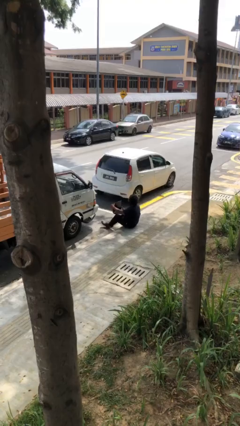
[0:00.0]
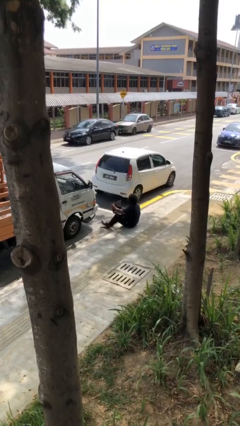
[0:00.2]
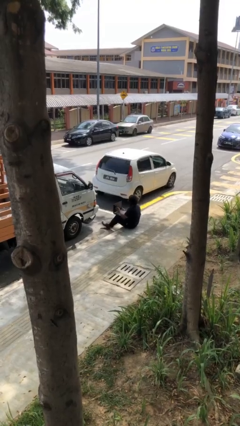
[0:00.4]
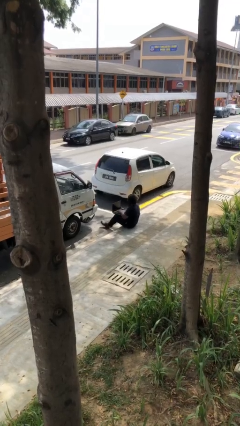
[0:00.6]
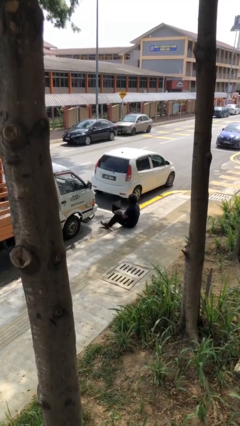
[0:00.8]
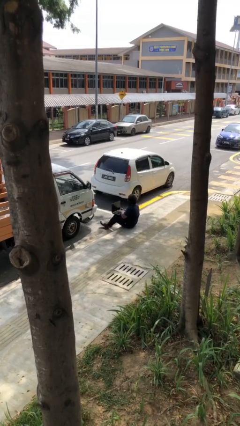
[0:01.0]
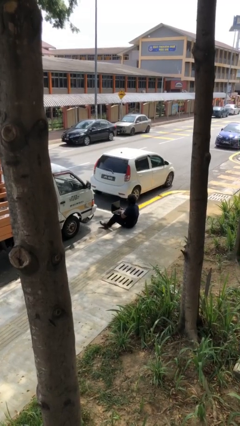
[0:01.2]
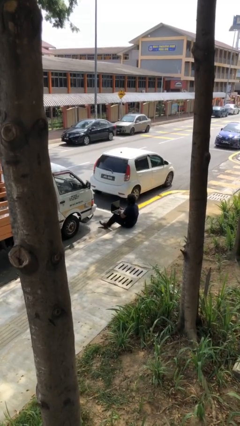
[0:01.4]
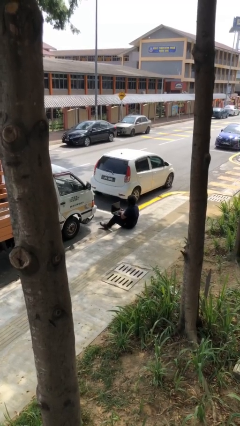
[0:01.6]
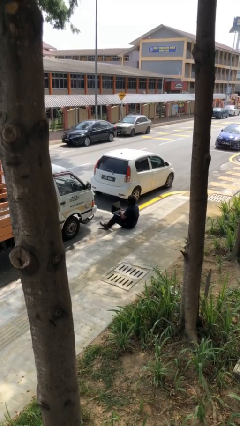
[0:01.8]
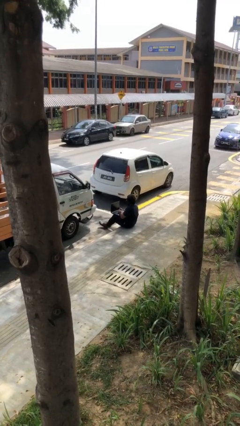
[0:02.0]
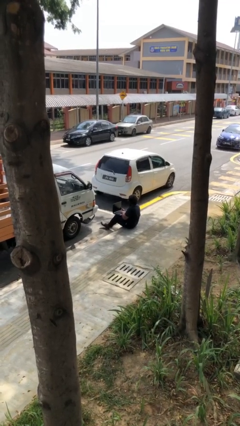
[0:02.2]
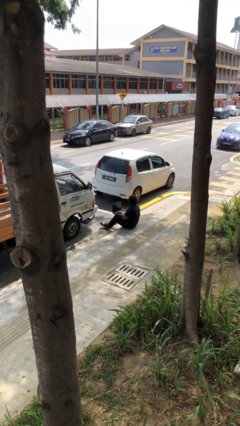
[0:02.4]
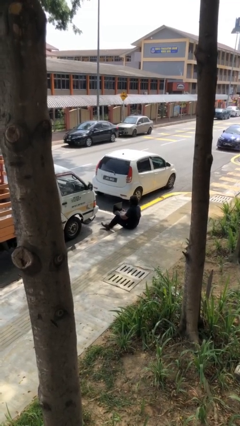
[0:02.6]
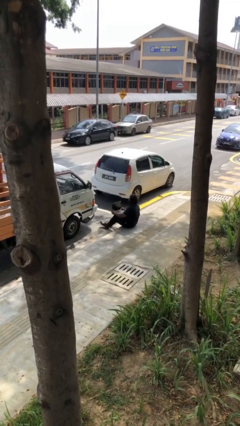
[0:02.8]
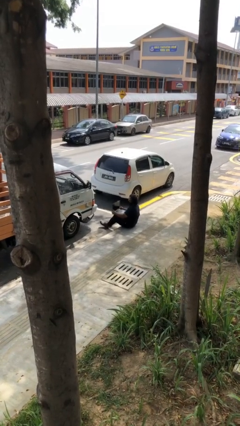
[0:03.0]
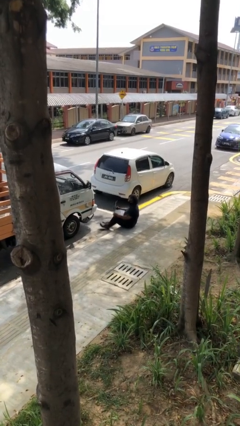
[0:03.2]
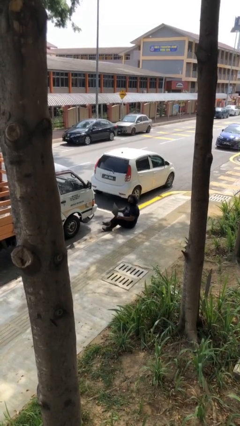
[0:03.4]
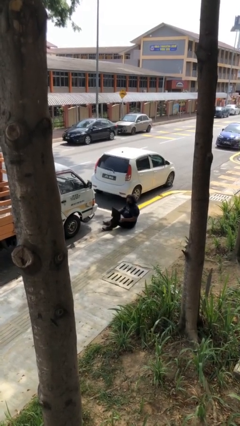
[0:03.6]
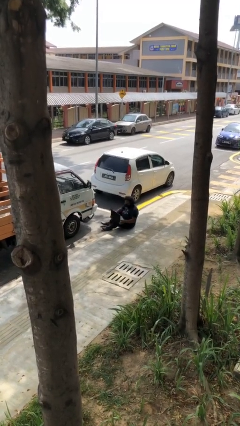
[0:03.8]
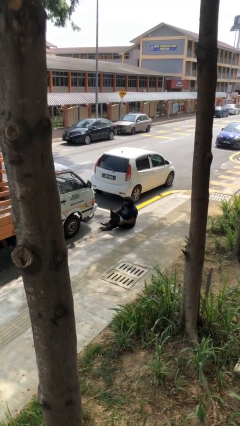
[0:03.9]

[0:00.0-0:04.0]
person interacts with laptop

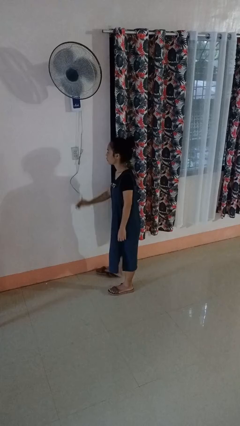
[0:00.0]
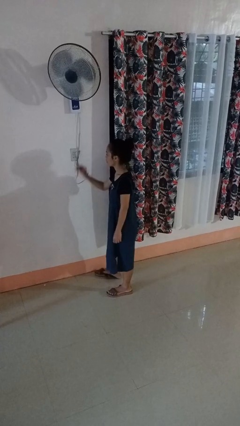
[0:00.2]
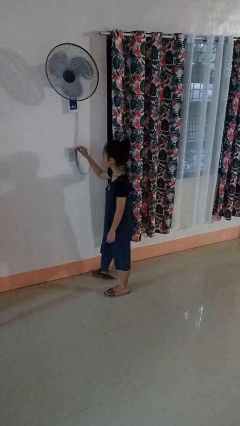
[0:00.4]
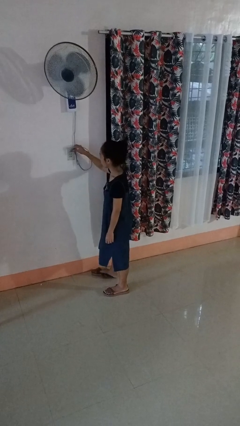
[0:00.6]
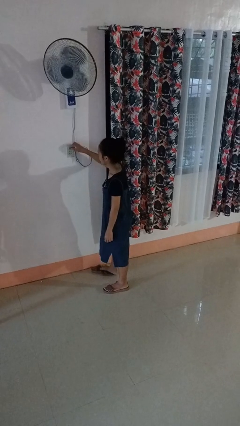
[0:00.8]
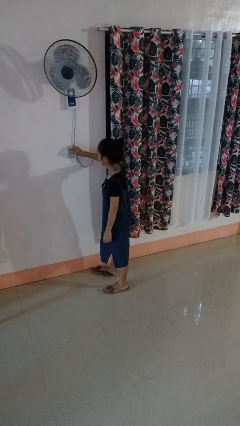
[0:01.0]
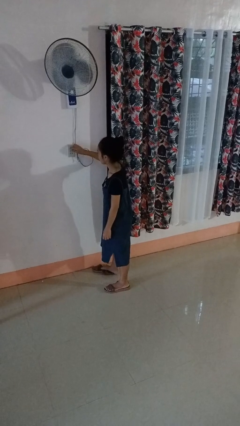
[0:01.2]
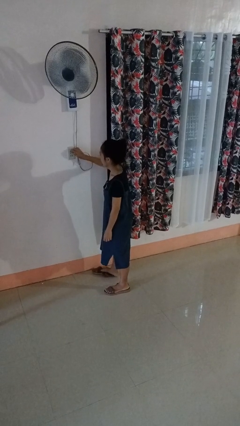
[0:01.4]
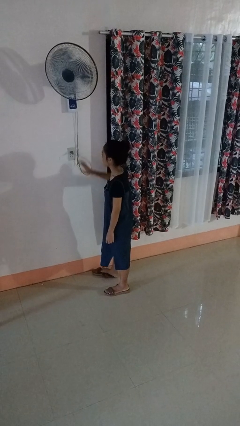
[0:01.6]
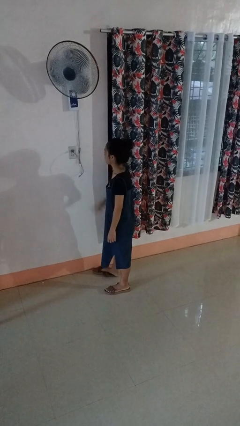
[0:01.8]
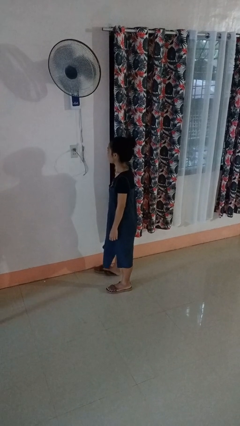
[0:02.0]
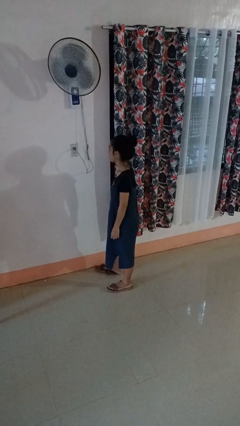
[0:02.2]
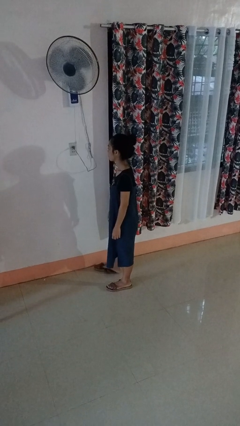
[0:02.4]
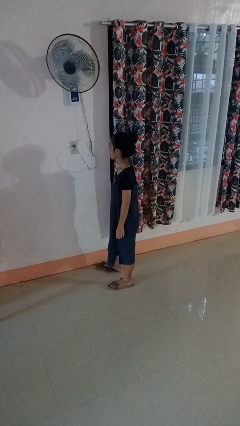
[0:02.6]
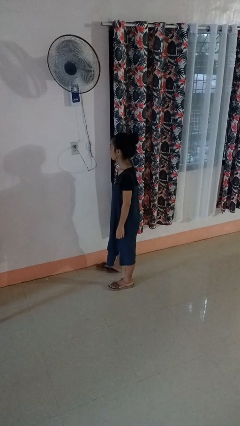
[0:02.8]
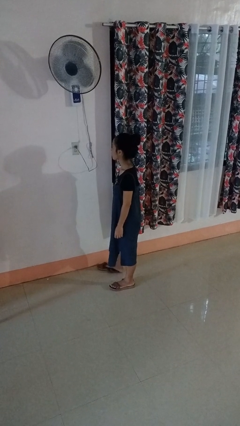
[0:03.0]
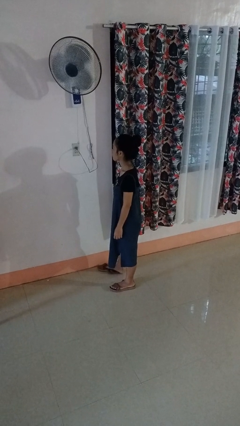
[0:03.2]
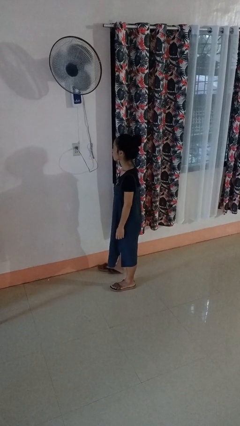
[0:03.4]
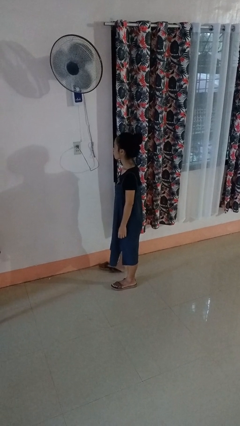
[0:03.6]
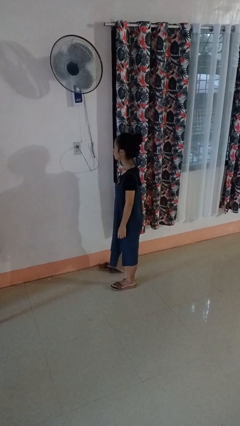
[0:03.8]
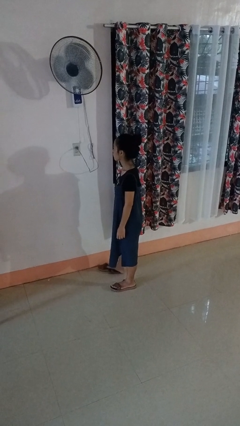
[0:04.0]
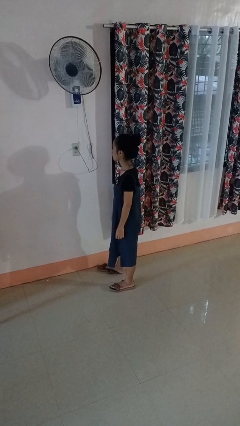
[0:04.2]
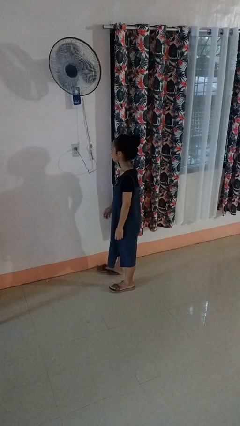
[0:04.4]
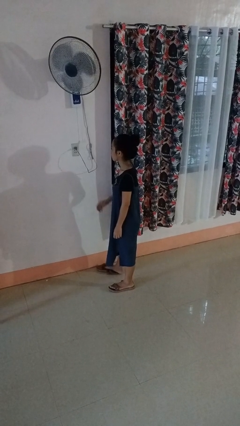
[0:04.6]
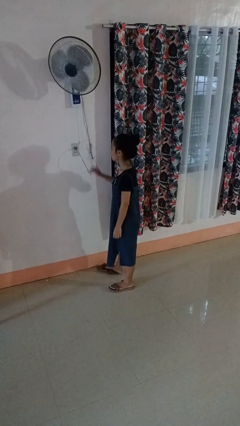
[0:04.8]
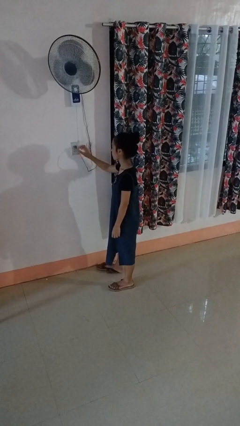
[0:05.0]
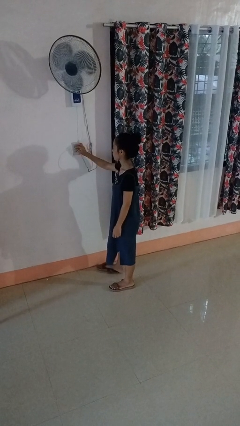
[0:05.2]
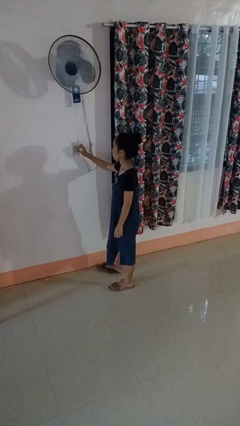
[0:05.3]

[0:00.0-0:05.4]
person plugs into electrical socket

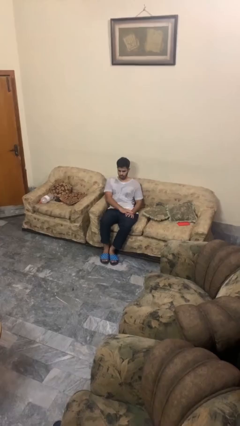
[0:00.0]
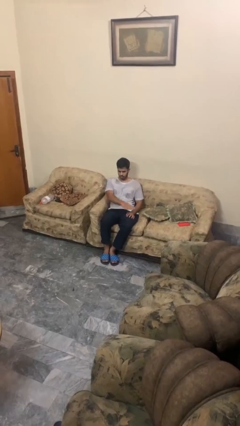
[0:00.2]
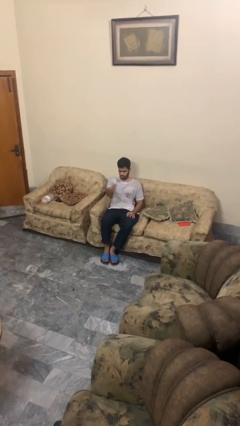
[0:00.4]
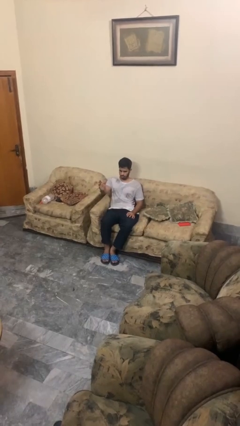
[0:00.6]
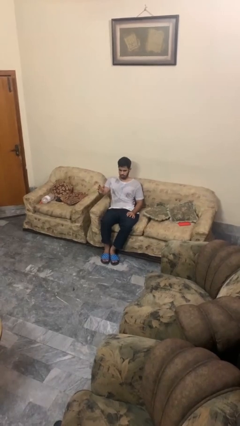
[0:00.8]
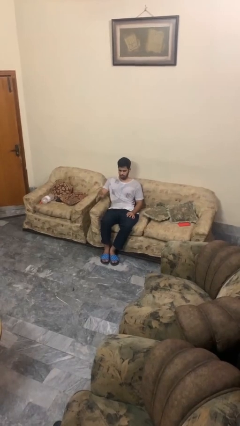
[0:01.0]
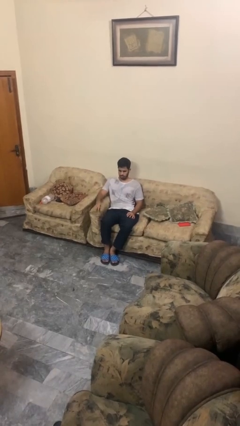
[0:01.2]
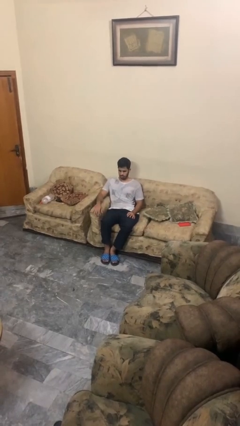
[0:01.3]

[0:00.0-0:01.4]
person gestures swipe right

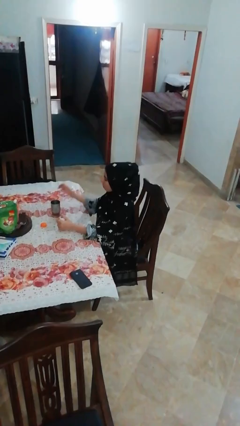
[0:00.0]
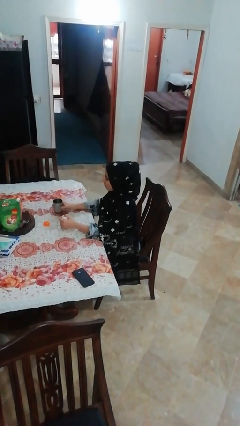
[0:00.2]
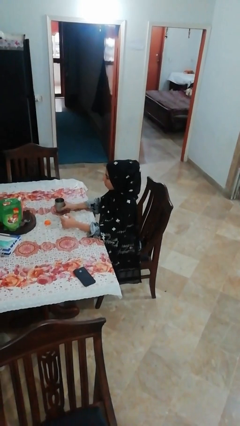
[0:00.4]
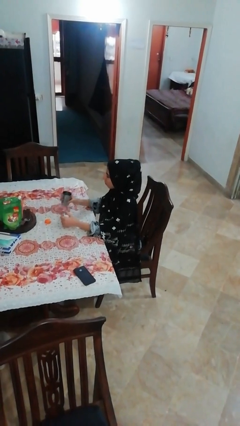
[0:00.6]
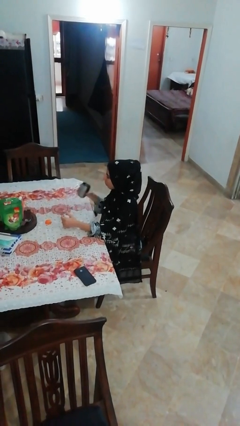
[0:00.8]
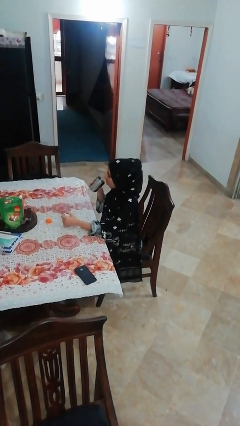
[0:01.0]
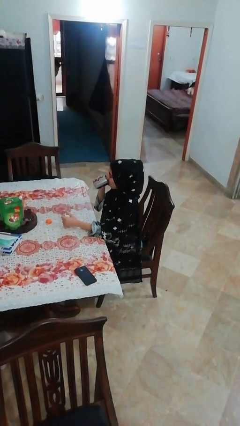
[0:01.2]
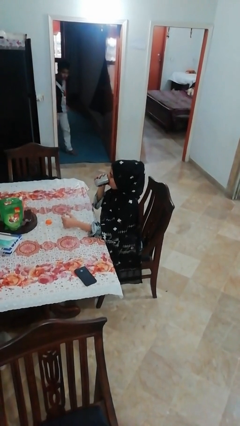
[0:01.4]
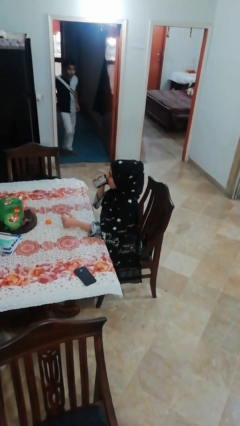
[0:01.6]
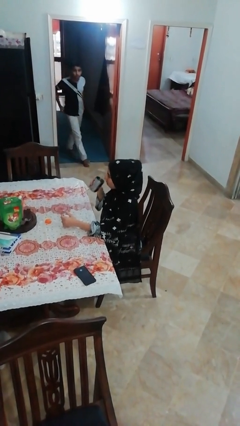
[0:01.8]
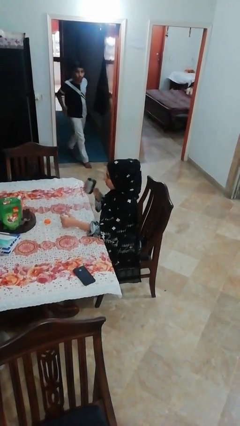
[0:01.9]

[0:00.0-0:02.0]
person drinks from cup

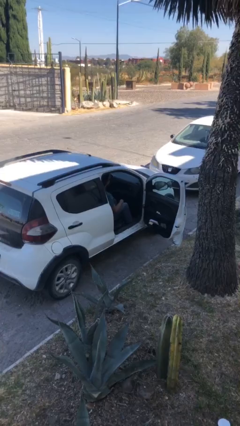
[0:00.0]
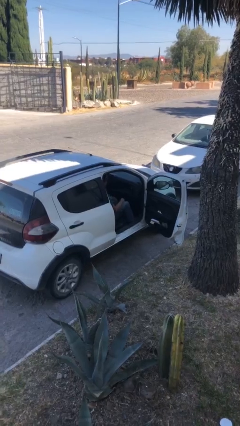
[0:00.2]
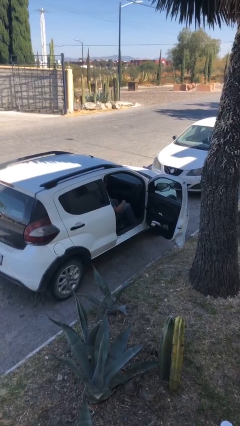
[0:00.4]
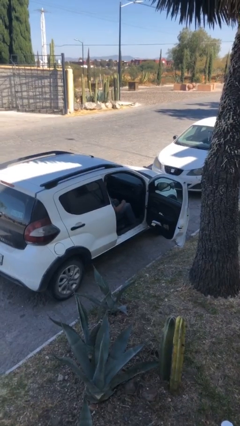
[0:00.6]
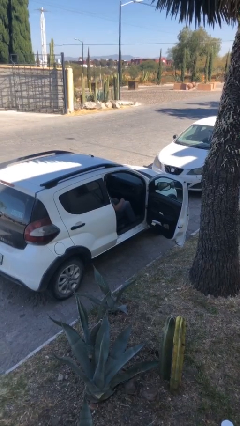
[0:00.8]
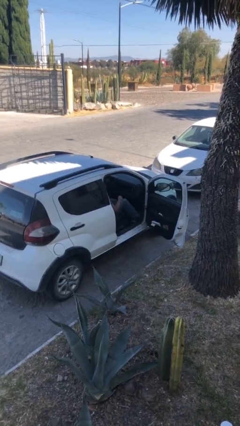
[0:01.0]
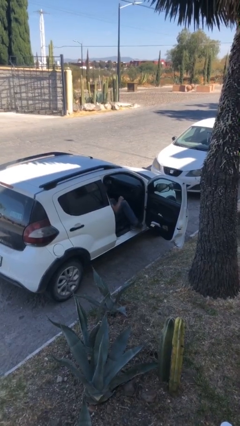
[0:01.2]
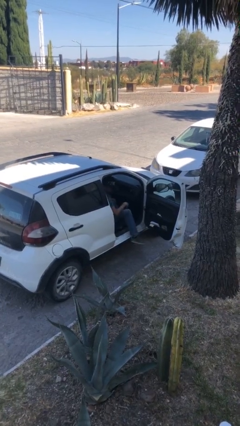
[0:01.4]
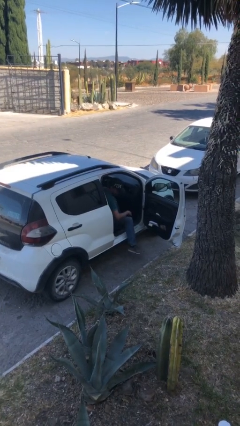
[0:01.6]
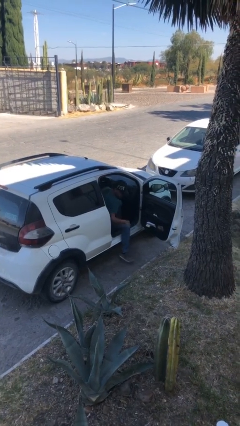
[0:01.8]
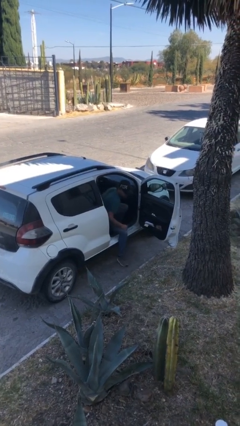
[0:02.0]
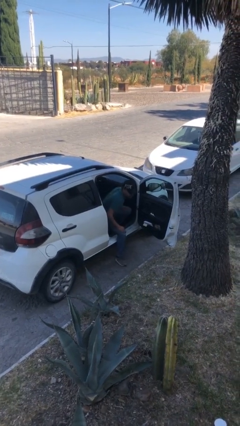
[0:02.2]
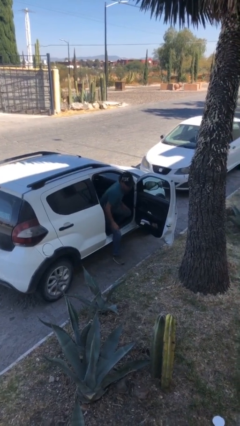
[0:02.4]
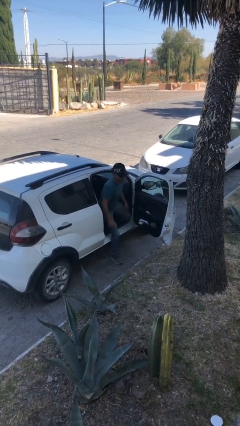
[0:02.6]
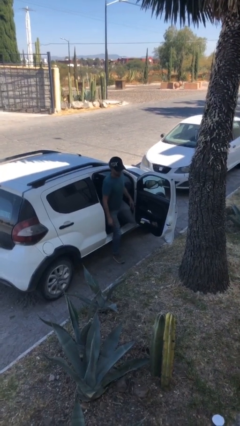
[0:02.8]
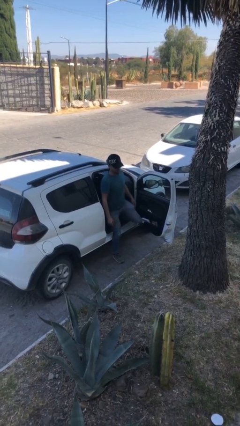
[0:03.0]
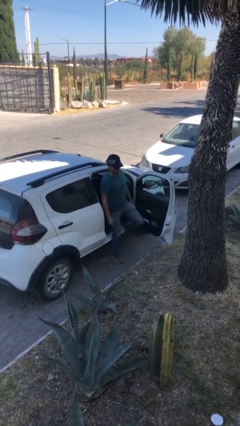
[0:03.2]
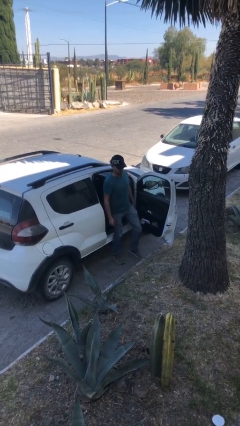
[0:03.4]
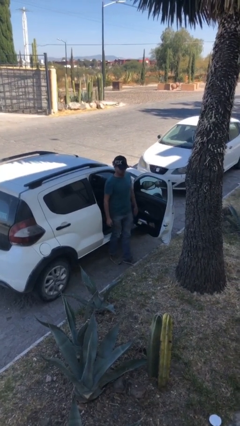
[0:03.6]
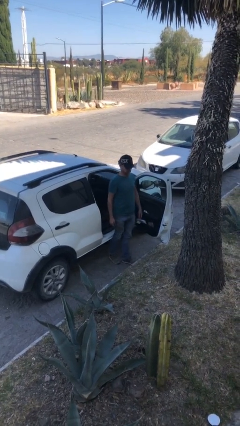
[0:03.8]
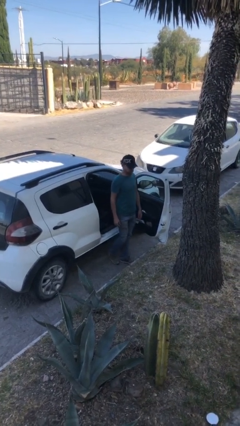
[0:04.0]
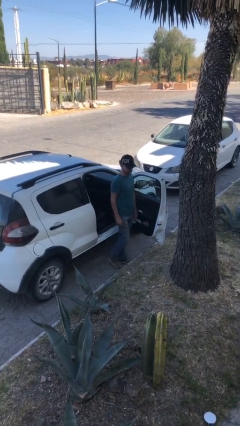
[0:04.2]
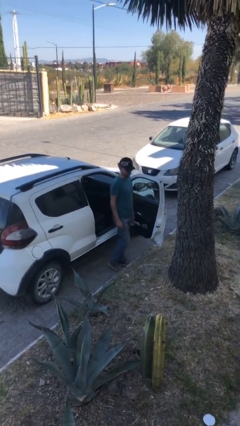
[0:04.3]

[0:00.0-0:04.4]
person exits car

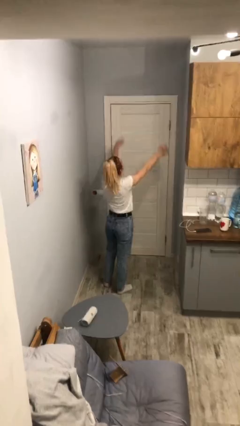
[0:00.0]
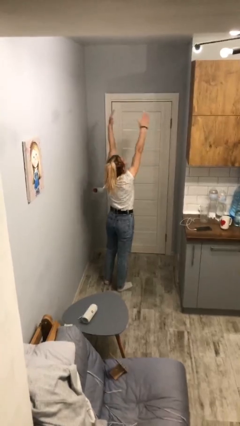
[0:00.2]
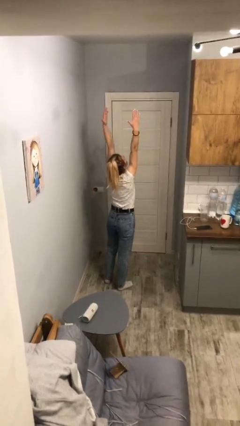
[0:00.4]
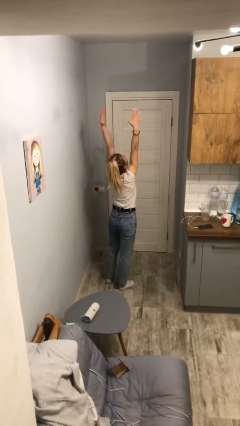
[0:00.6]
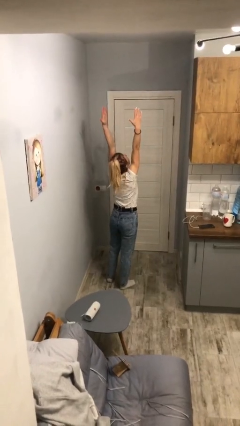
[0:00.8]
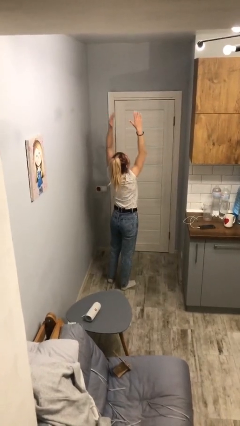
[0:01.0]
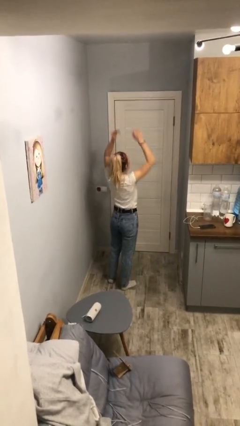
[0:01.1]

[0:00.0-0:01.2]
person stretches arms over head
